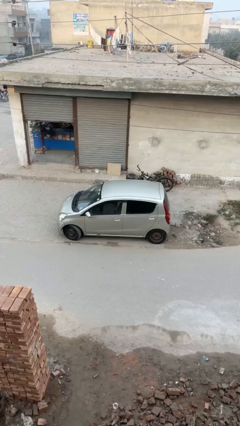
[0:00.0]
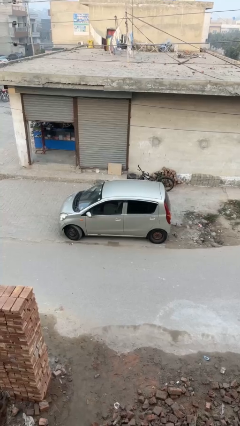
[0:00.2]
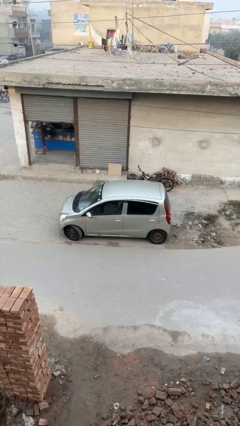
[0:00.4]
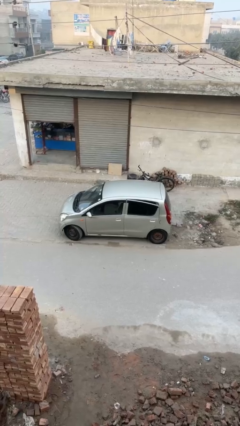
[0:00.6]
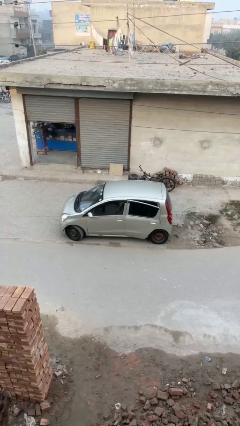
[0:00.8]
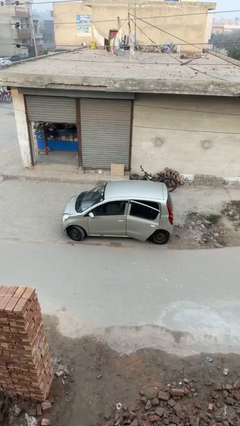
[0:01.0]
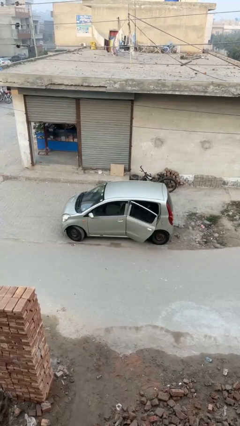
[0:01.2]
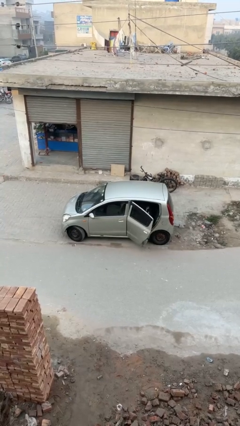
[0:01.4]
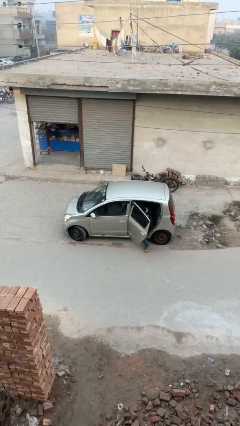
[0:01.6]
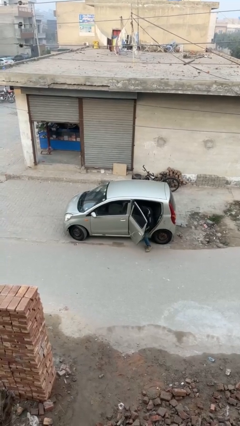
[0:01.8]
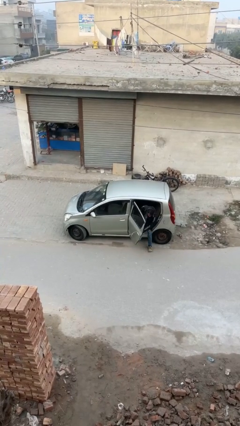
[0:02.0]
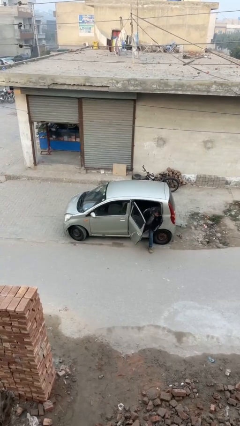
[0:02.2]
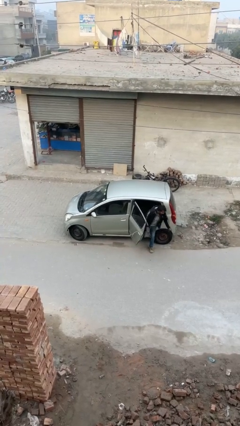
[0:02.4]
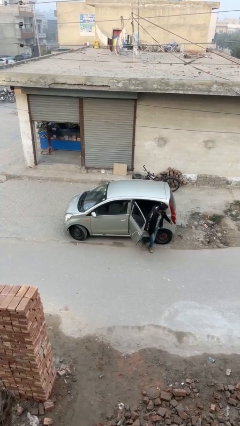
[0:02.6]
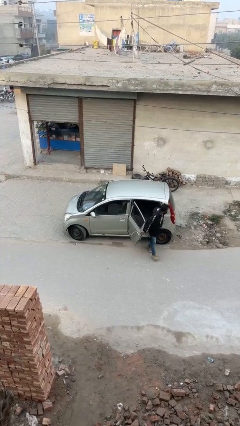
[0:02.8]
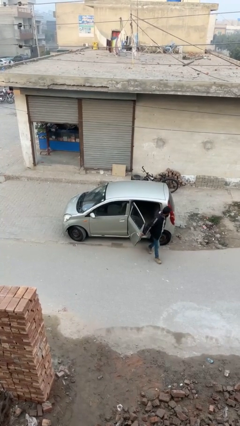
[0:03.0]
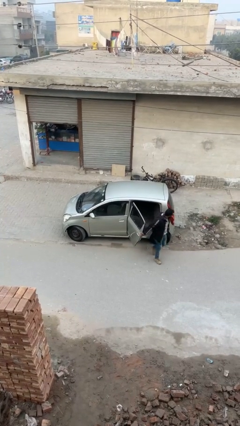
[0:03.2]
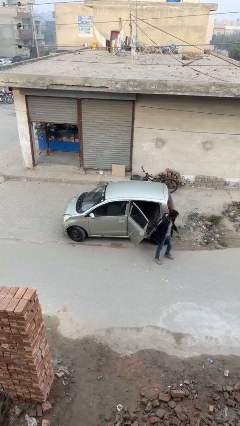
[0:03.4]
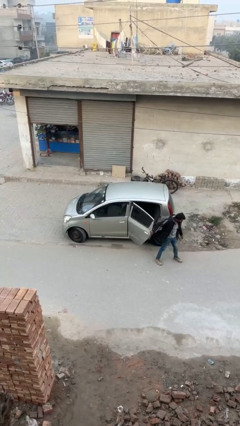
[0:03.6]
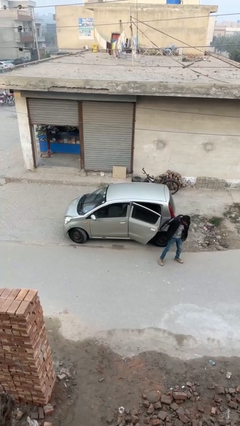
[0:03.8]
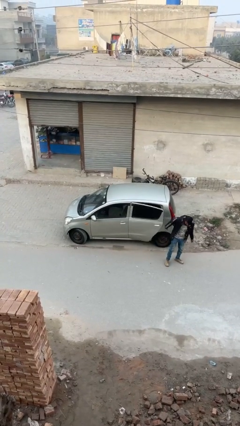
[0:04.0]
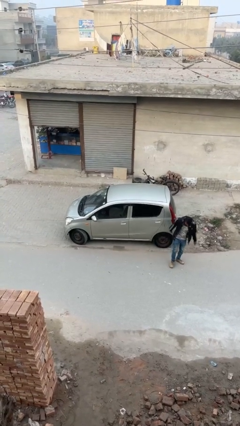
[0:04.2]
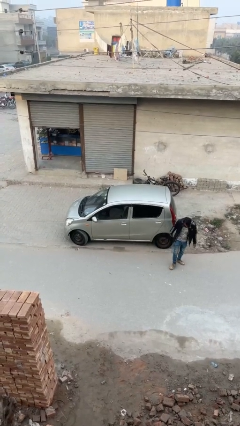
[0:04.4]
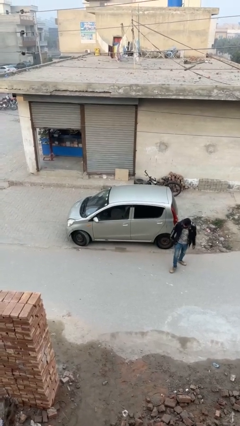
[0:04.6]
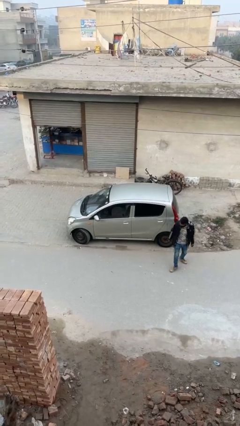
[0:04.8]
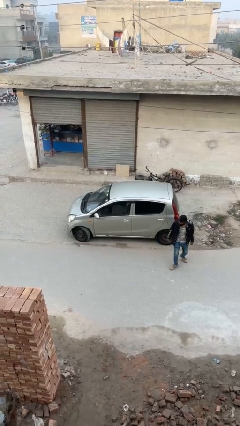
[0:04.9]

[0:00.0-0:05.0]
car drops off person

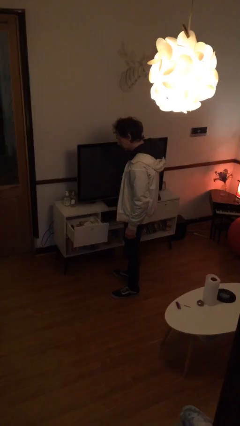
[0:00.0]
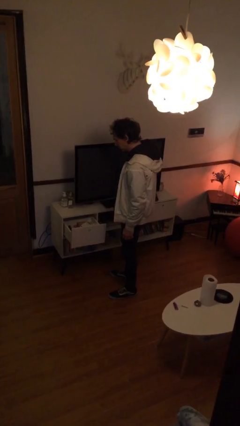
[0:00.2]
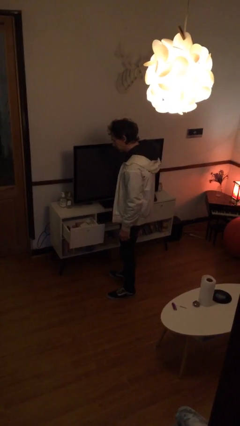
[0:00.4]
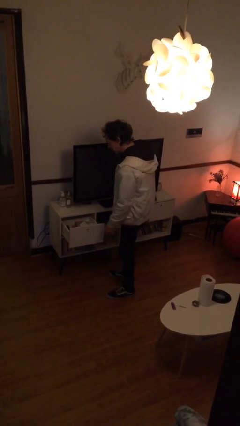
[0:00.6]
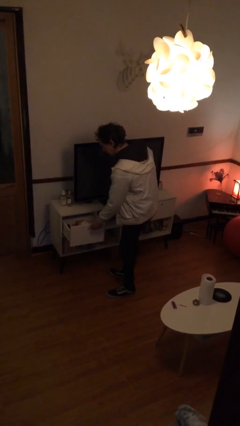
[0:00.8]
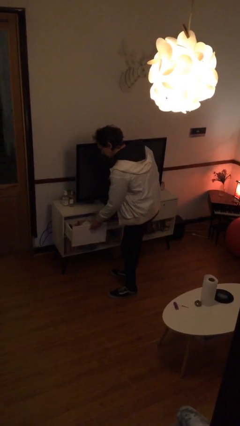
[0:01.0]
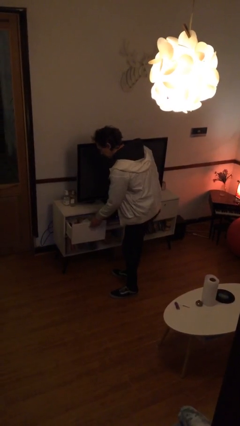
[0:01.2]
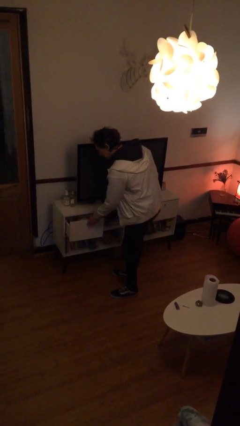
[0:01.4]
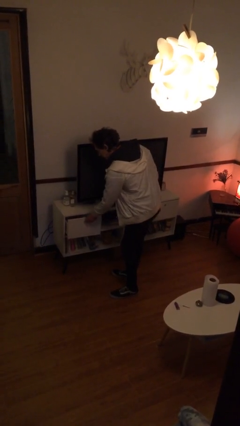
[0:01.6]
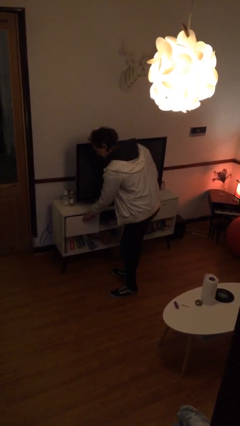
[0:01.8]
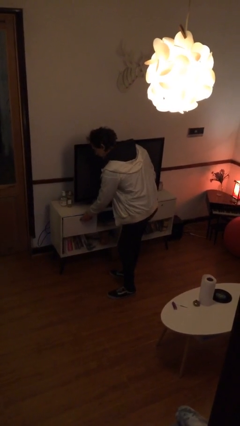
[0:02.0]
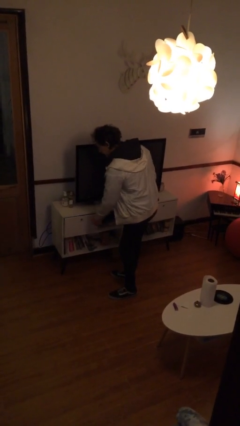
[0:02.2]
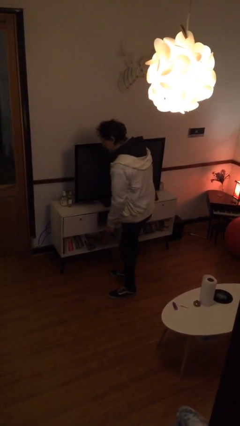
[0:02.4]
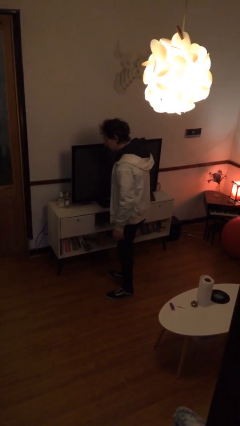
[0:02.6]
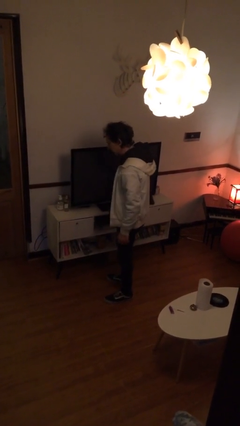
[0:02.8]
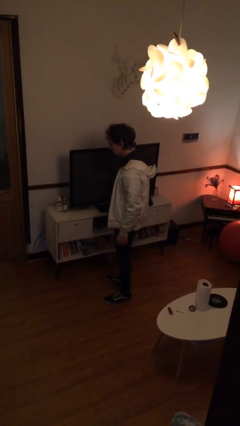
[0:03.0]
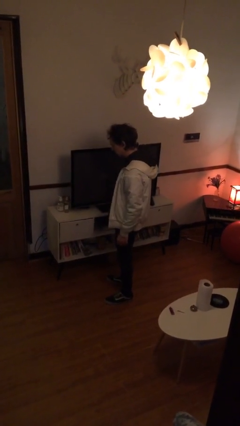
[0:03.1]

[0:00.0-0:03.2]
person closes dresser drawer

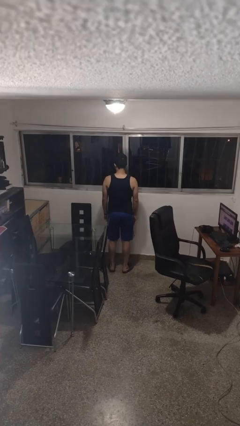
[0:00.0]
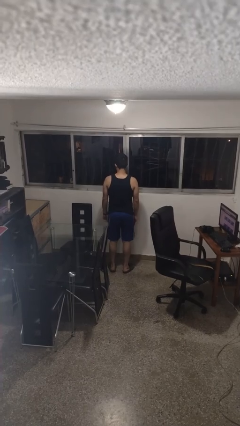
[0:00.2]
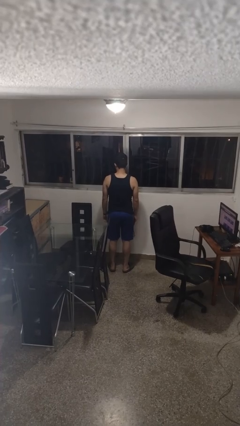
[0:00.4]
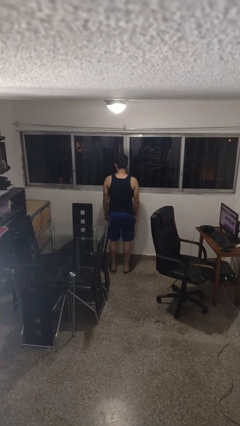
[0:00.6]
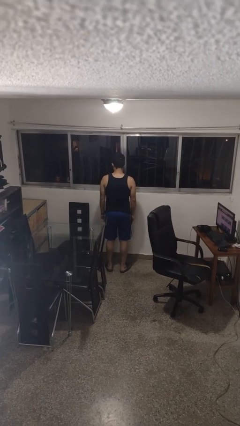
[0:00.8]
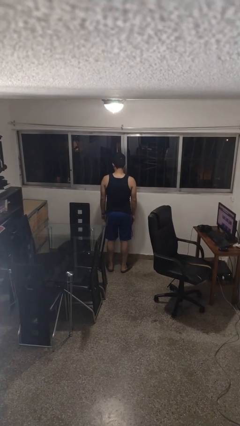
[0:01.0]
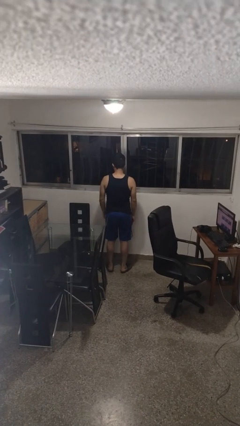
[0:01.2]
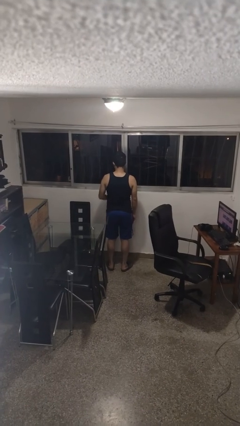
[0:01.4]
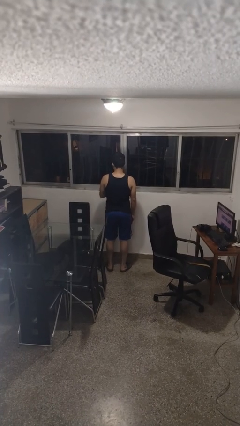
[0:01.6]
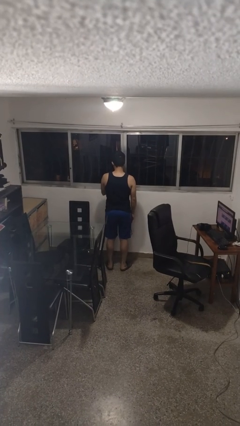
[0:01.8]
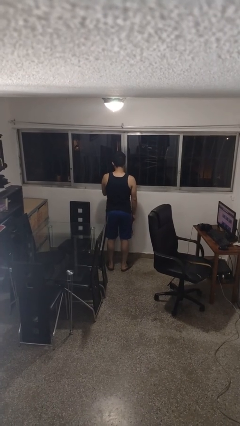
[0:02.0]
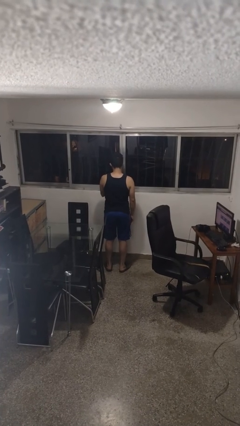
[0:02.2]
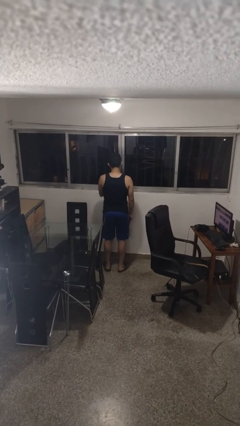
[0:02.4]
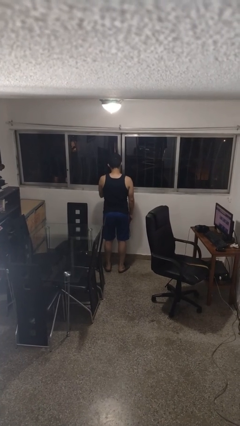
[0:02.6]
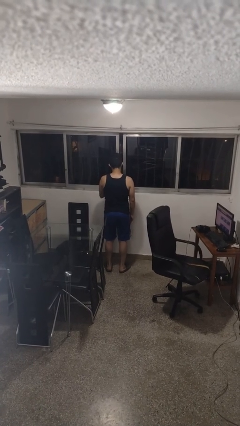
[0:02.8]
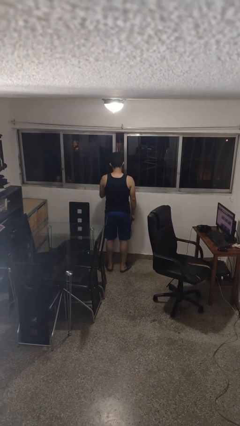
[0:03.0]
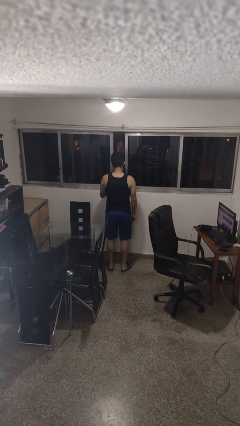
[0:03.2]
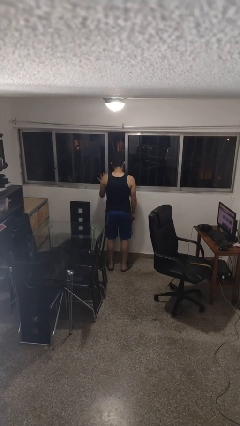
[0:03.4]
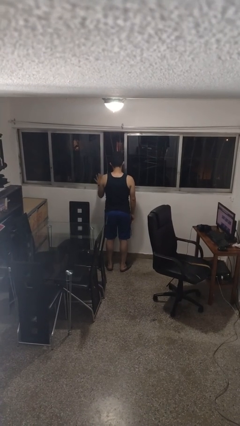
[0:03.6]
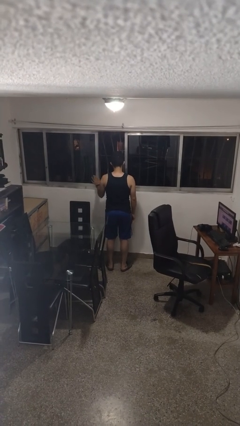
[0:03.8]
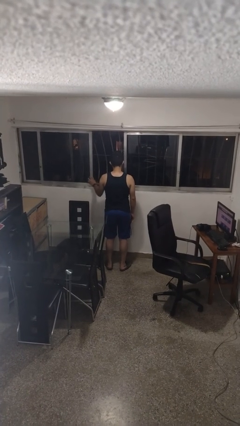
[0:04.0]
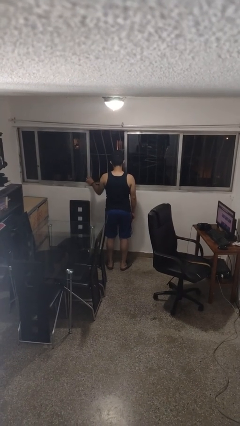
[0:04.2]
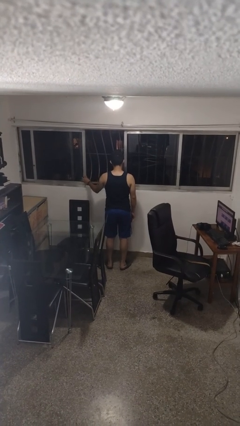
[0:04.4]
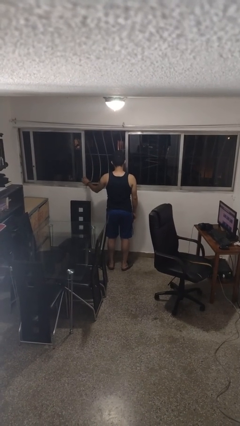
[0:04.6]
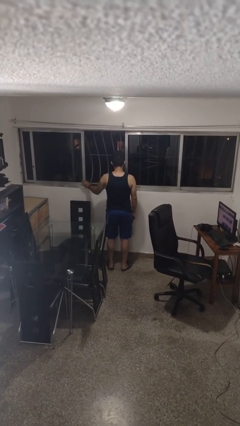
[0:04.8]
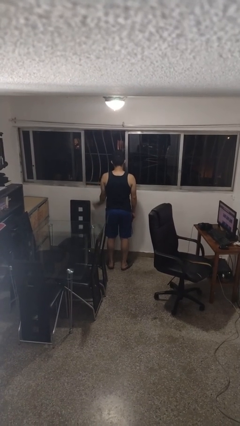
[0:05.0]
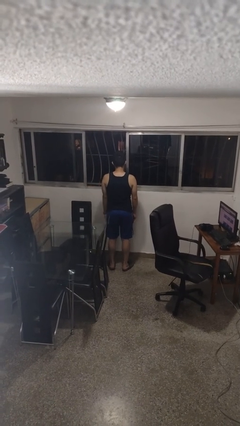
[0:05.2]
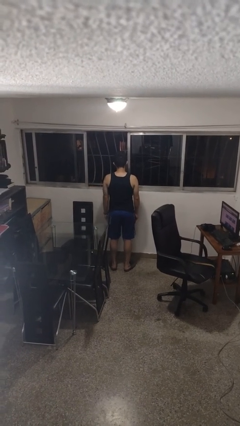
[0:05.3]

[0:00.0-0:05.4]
person opens home window

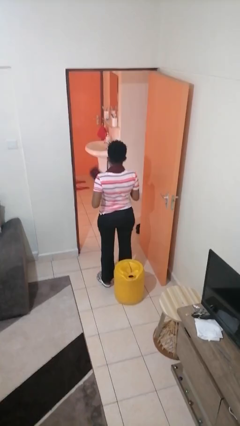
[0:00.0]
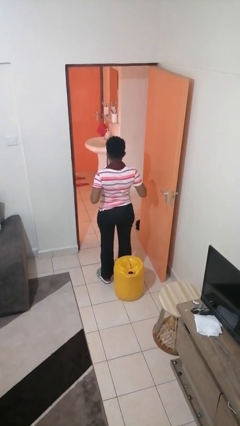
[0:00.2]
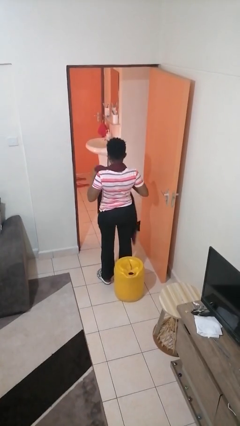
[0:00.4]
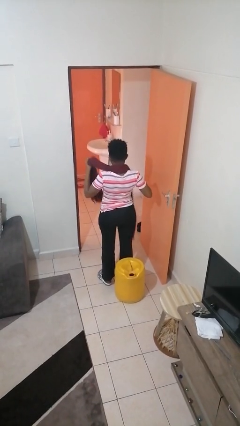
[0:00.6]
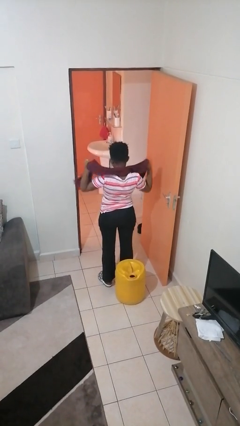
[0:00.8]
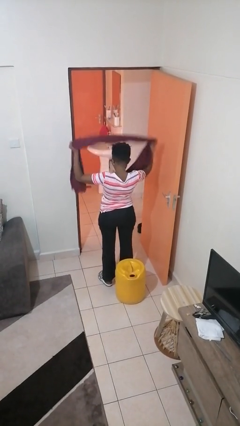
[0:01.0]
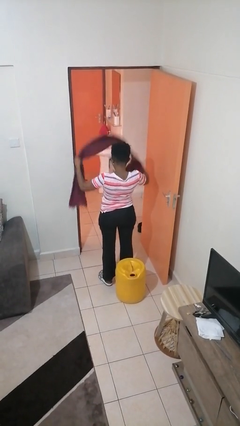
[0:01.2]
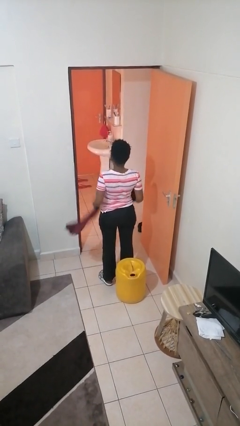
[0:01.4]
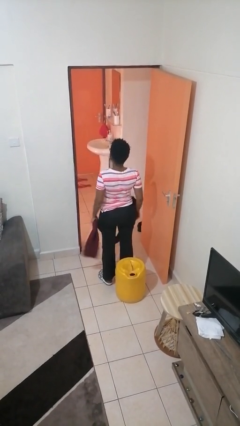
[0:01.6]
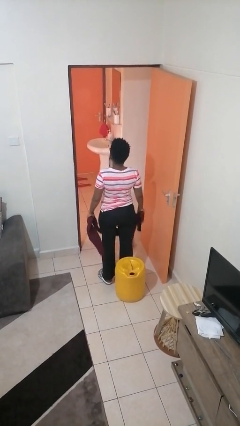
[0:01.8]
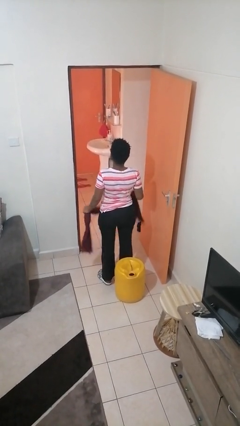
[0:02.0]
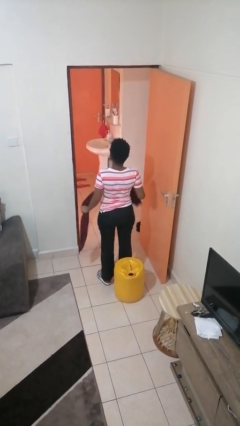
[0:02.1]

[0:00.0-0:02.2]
person takes off scarf

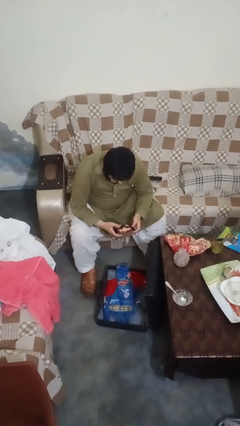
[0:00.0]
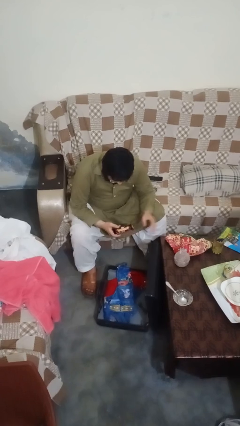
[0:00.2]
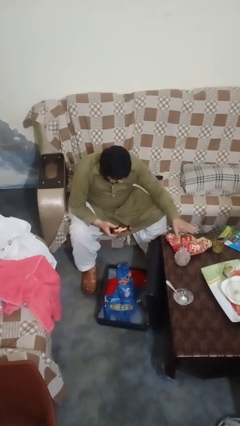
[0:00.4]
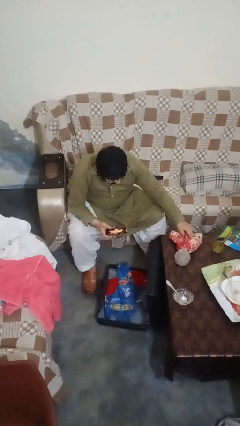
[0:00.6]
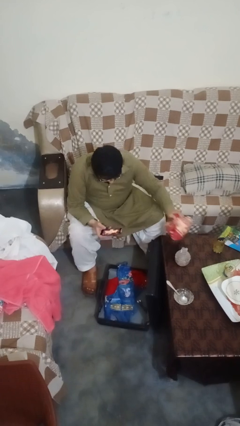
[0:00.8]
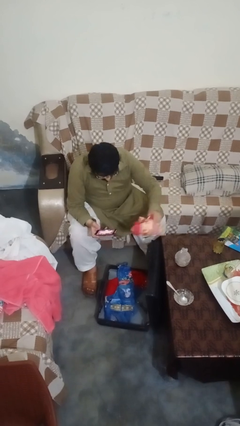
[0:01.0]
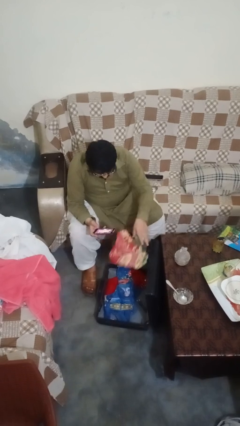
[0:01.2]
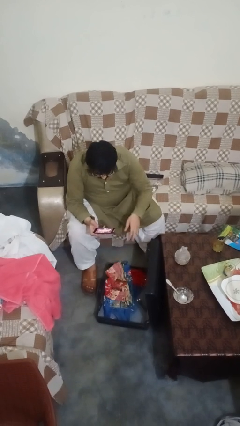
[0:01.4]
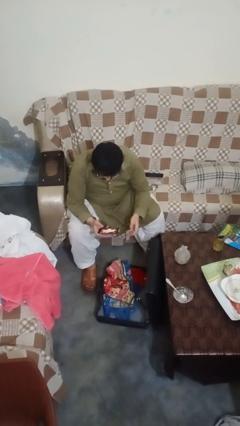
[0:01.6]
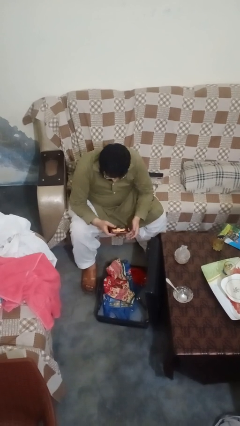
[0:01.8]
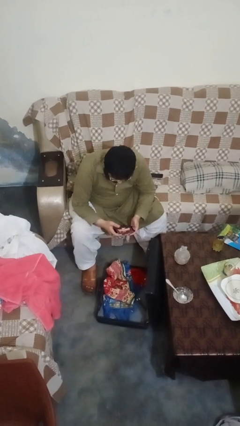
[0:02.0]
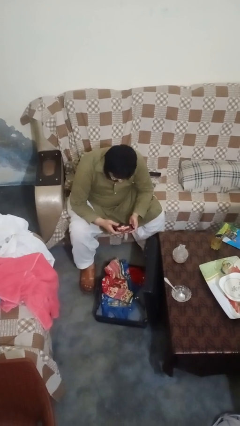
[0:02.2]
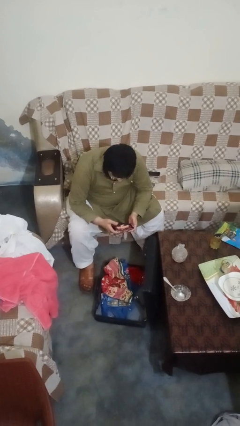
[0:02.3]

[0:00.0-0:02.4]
person loads clothes into suitcase
